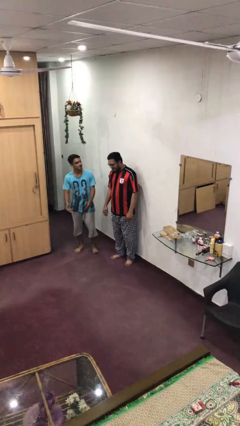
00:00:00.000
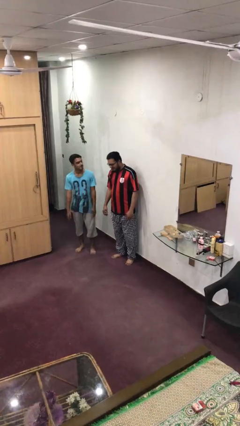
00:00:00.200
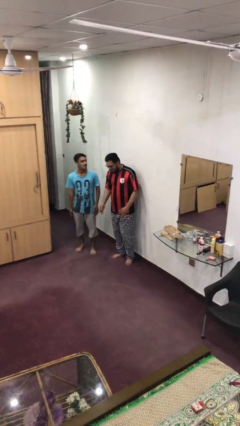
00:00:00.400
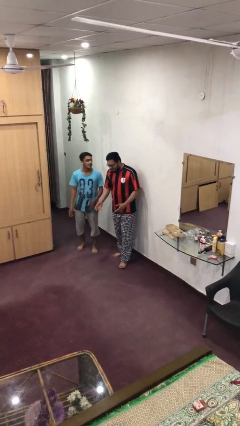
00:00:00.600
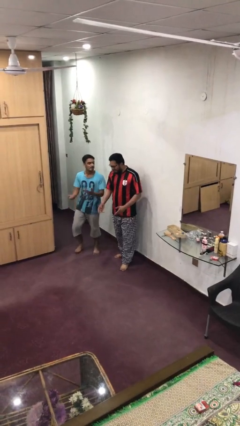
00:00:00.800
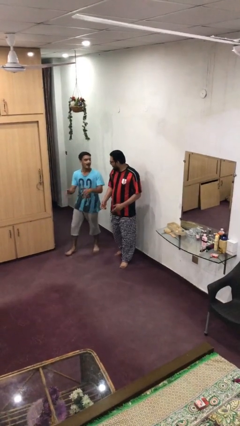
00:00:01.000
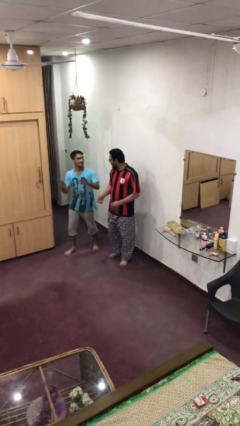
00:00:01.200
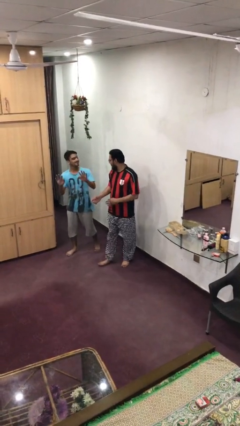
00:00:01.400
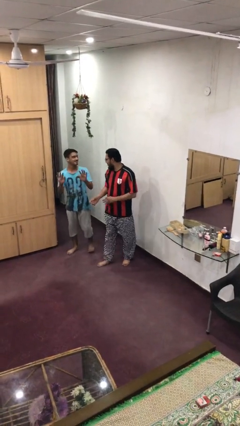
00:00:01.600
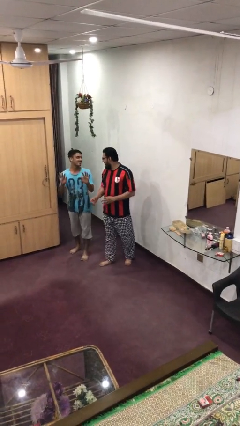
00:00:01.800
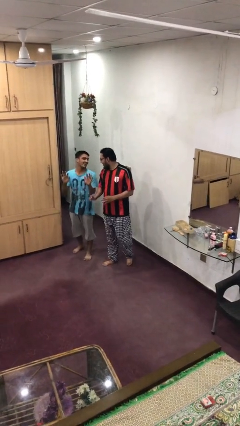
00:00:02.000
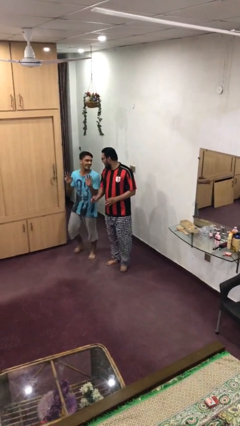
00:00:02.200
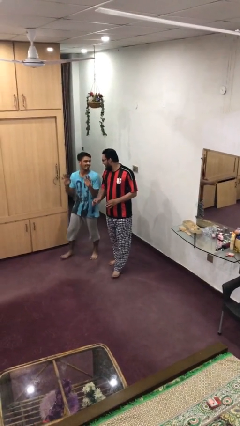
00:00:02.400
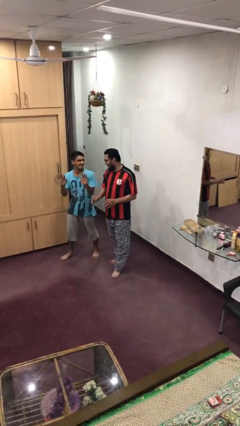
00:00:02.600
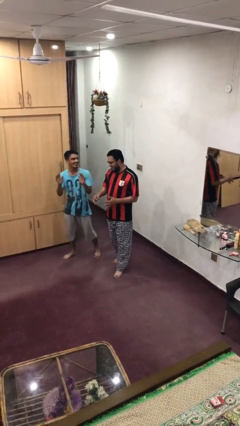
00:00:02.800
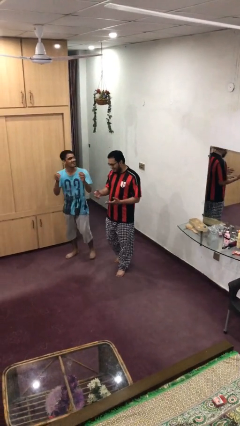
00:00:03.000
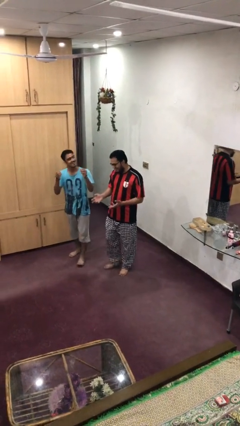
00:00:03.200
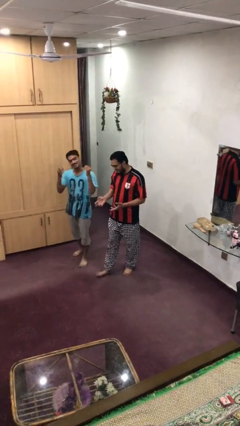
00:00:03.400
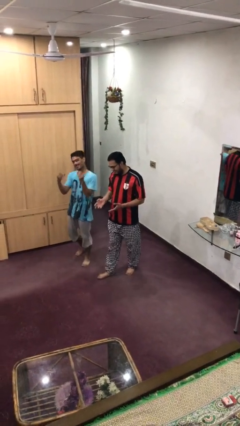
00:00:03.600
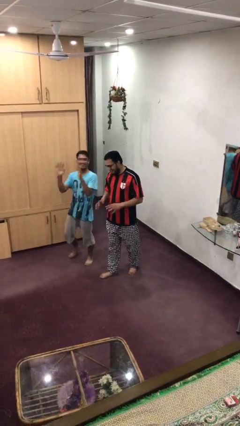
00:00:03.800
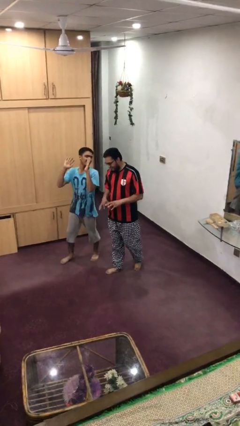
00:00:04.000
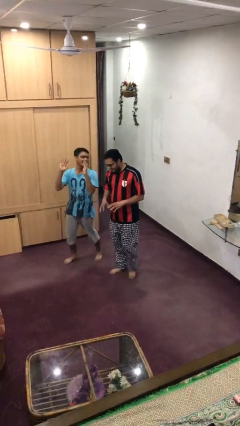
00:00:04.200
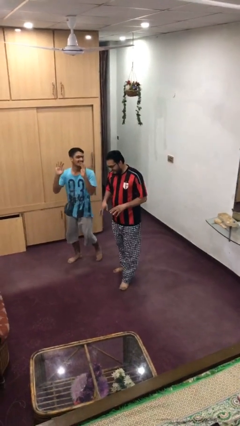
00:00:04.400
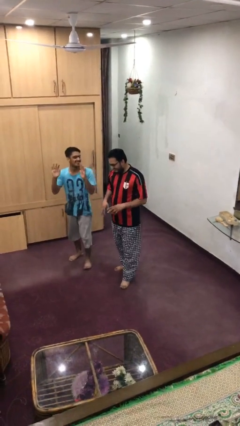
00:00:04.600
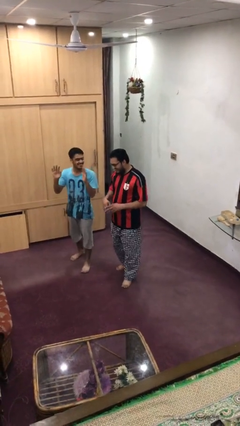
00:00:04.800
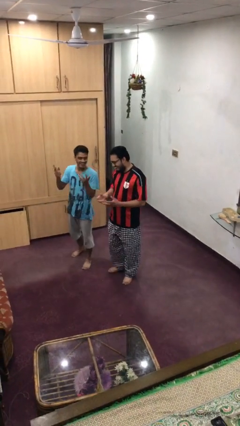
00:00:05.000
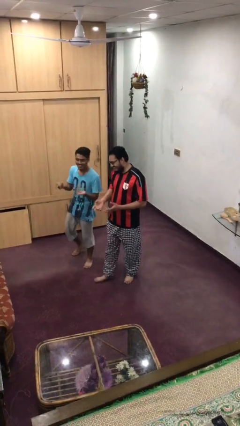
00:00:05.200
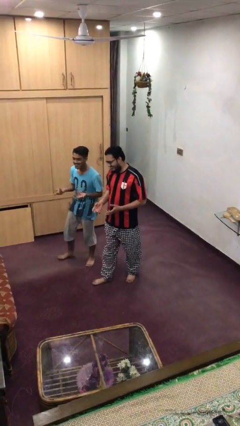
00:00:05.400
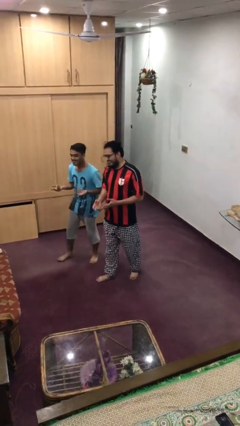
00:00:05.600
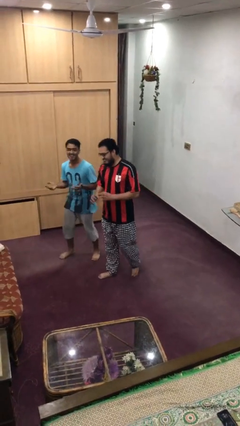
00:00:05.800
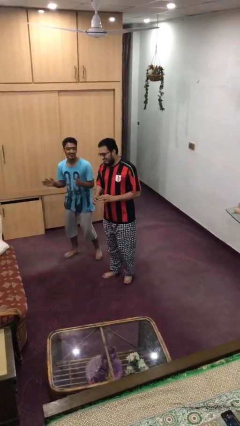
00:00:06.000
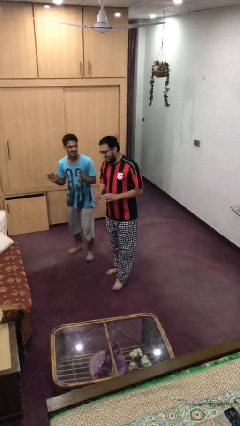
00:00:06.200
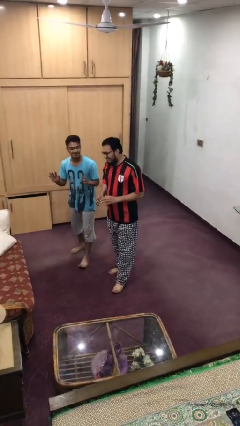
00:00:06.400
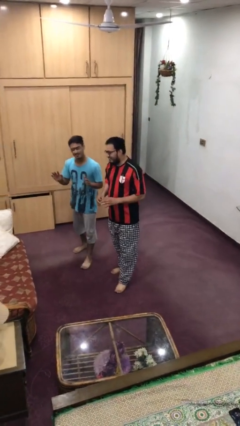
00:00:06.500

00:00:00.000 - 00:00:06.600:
person talks to person

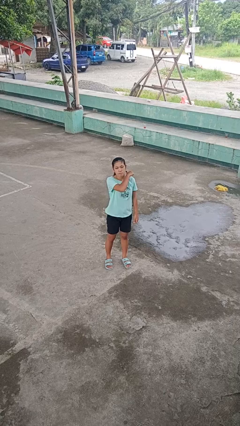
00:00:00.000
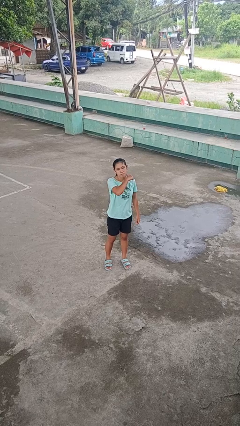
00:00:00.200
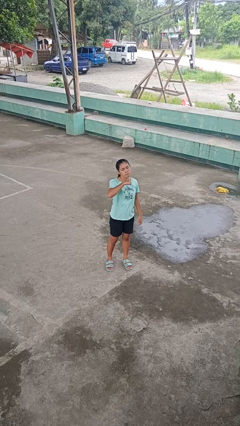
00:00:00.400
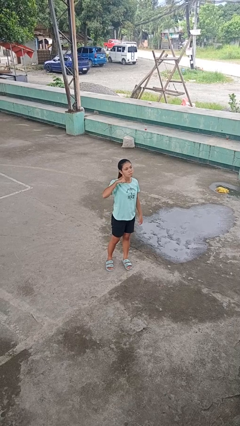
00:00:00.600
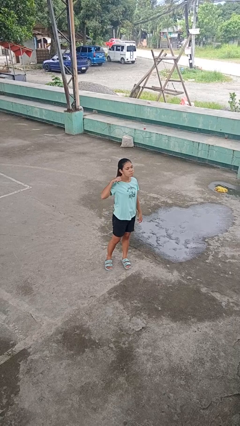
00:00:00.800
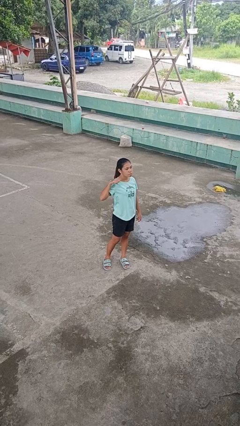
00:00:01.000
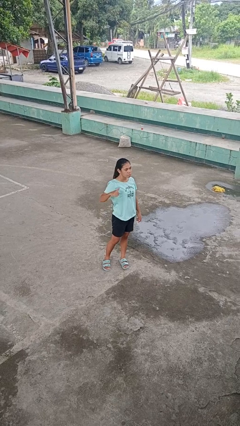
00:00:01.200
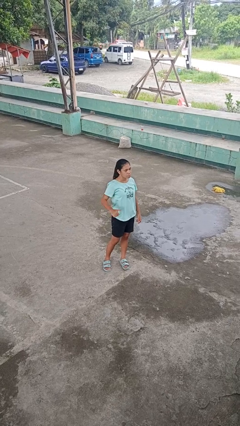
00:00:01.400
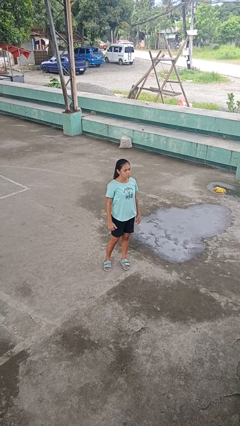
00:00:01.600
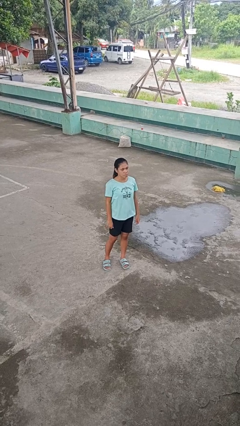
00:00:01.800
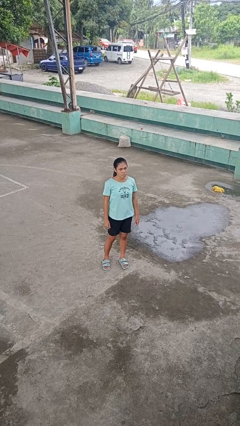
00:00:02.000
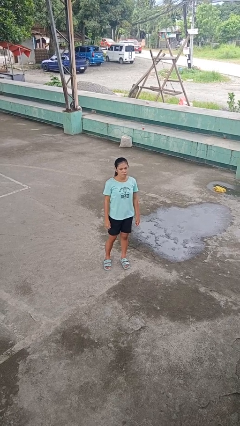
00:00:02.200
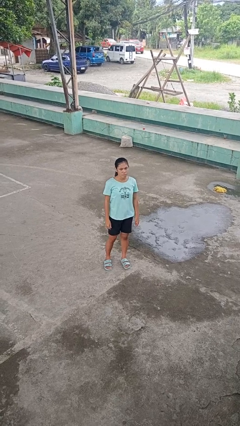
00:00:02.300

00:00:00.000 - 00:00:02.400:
person gestures cut

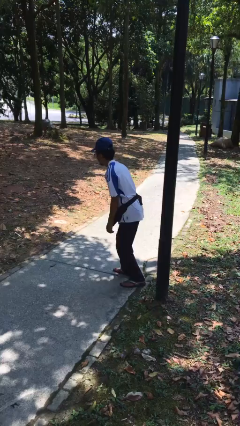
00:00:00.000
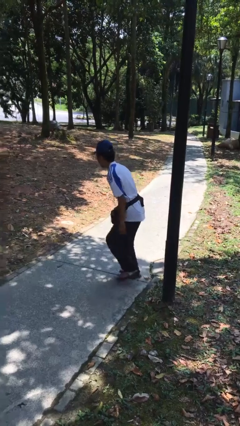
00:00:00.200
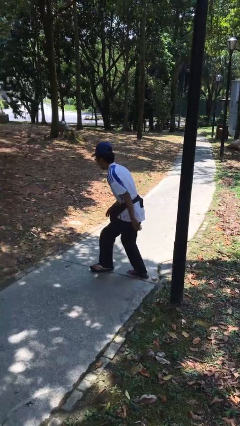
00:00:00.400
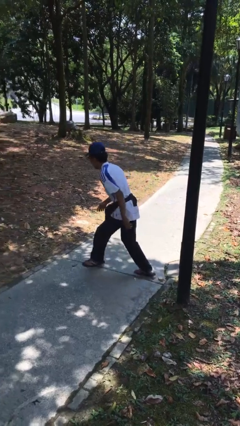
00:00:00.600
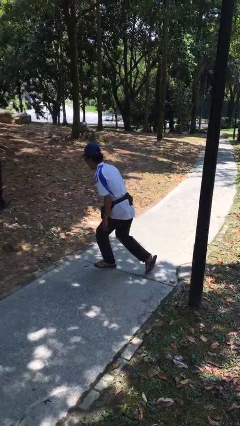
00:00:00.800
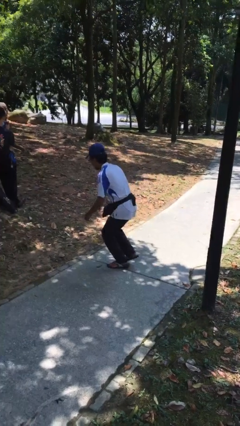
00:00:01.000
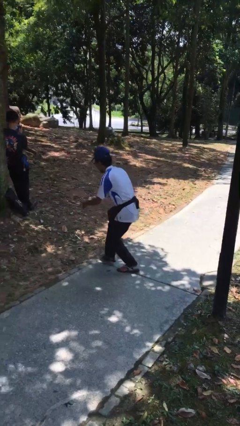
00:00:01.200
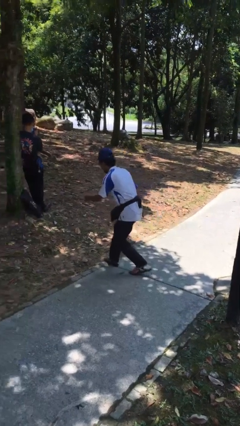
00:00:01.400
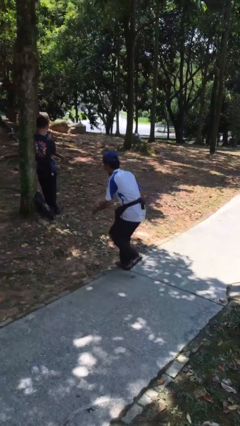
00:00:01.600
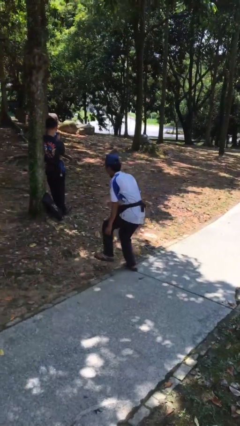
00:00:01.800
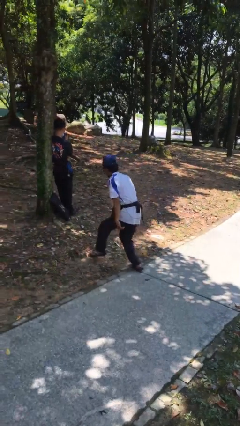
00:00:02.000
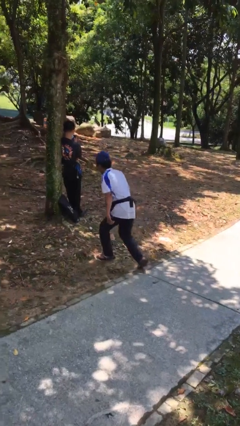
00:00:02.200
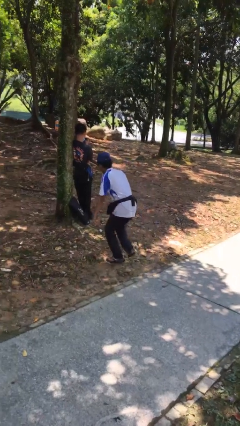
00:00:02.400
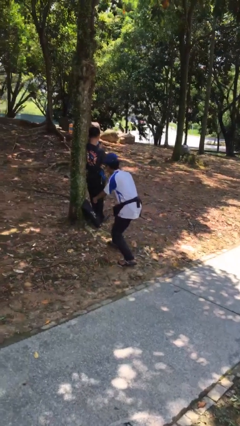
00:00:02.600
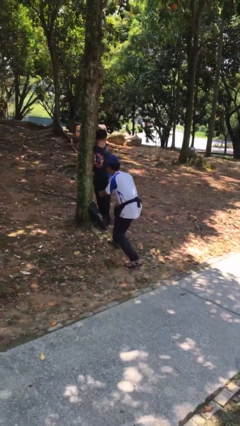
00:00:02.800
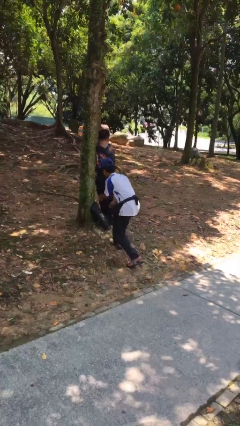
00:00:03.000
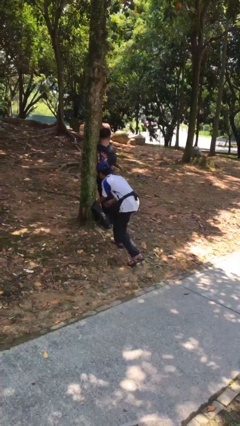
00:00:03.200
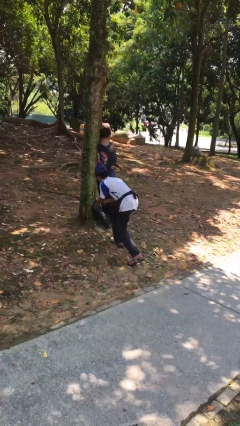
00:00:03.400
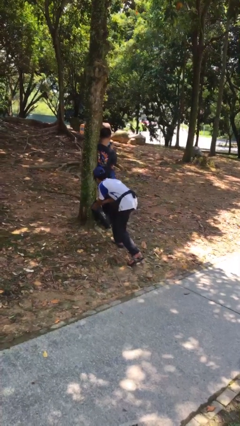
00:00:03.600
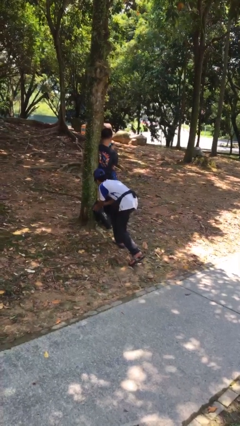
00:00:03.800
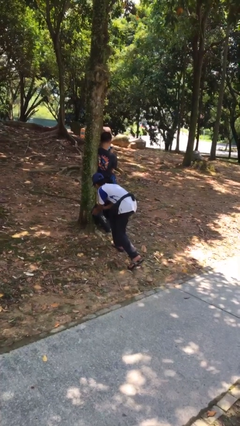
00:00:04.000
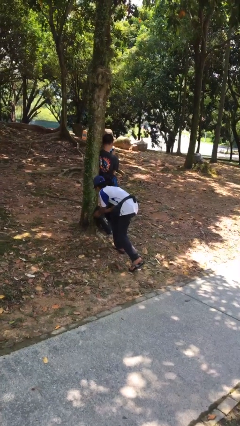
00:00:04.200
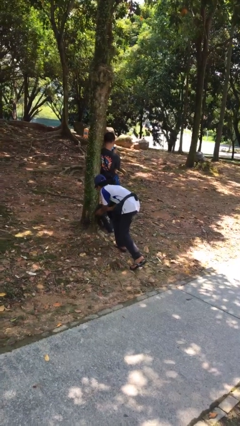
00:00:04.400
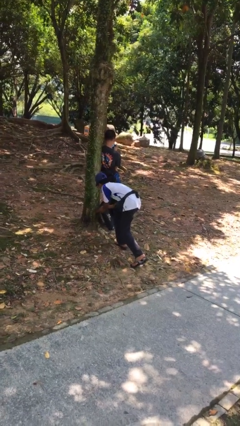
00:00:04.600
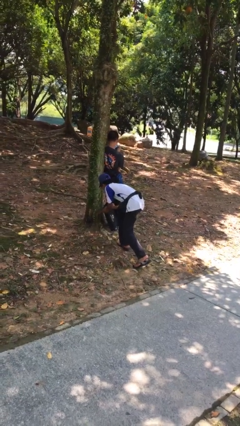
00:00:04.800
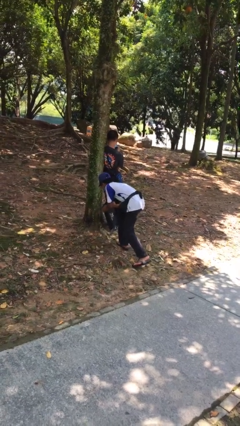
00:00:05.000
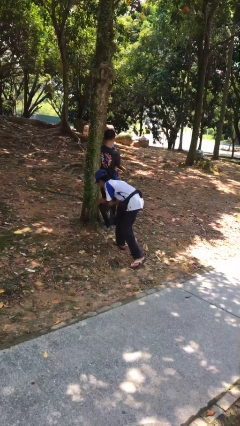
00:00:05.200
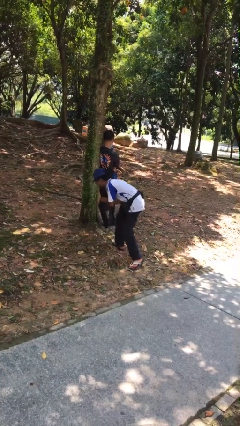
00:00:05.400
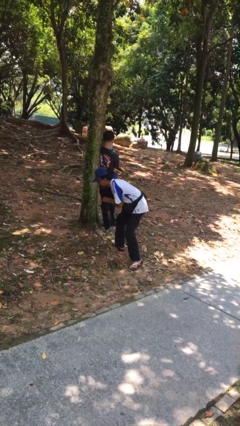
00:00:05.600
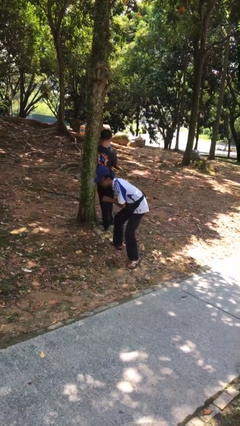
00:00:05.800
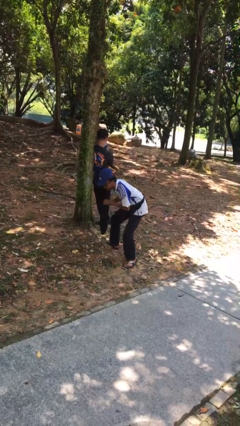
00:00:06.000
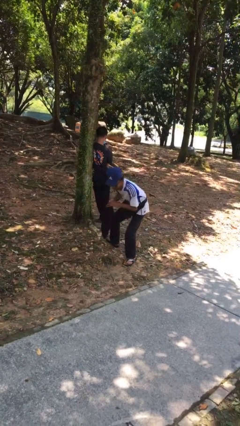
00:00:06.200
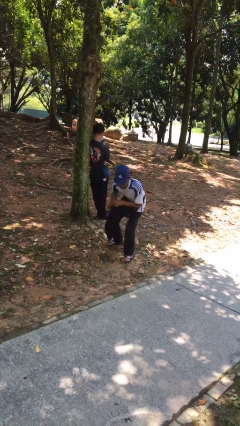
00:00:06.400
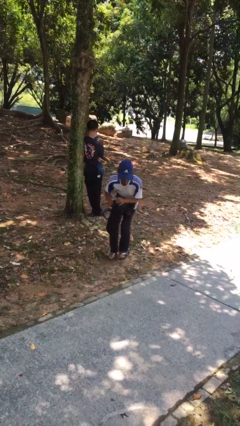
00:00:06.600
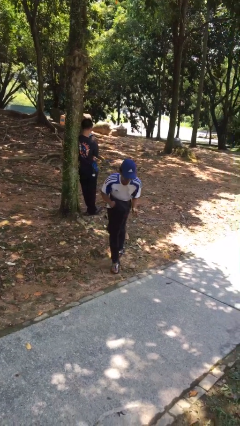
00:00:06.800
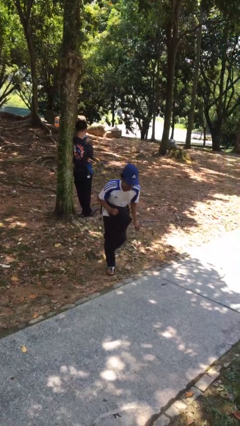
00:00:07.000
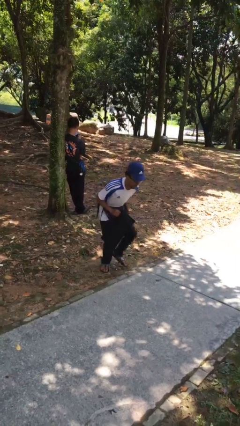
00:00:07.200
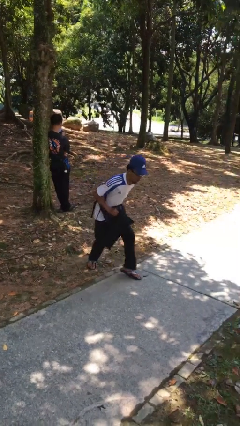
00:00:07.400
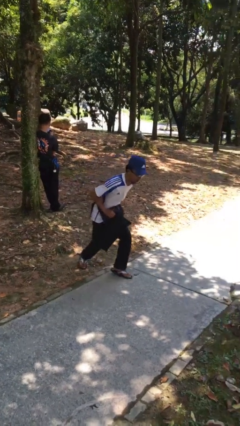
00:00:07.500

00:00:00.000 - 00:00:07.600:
person steals object from person

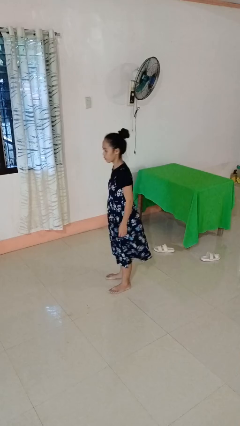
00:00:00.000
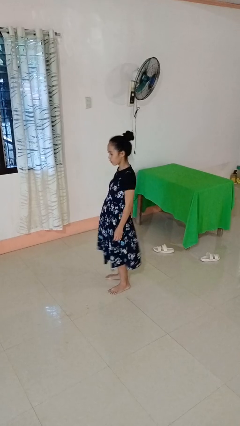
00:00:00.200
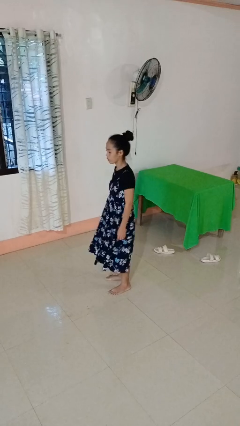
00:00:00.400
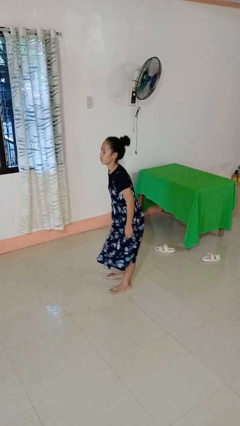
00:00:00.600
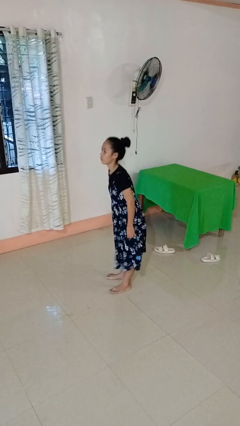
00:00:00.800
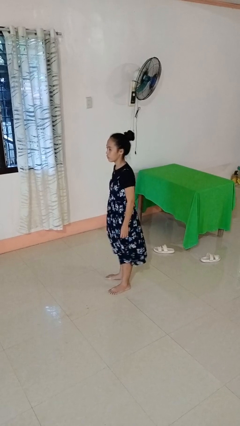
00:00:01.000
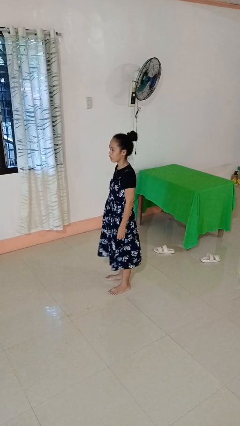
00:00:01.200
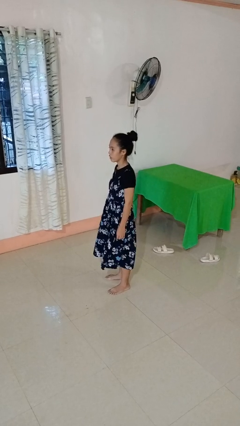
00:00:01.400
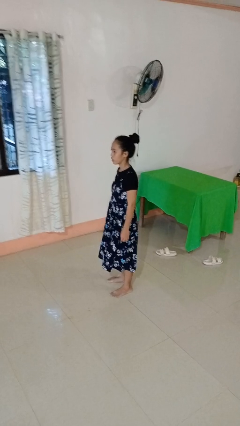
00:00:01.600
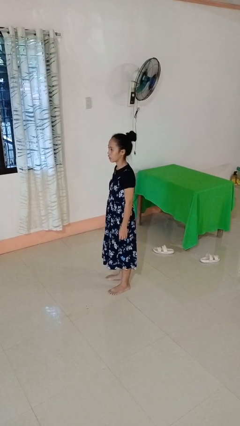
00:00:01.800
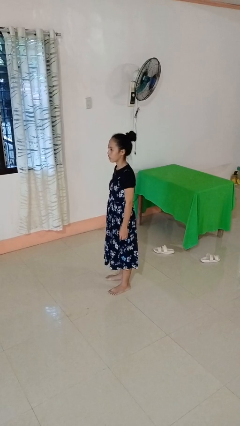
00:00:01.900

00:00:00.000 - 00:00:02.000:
person wiggles hips
